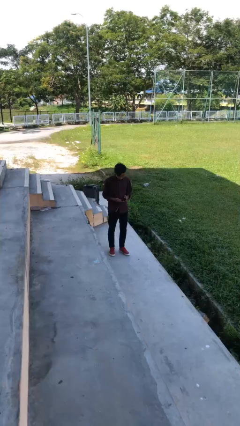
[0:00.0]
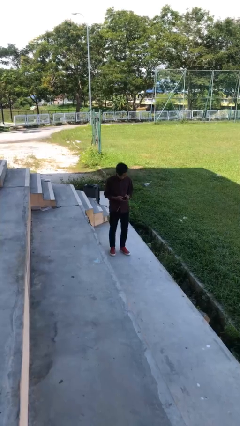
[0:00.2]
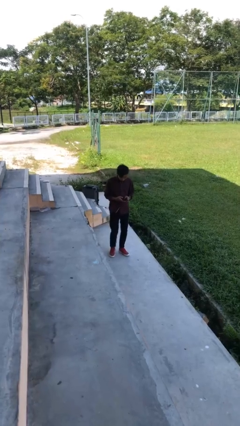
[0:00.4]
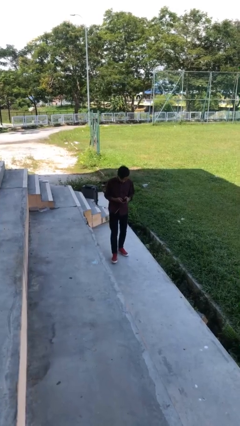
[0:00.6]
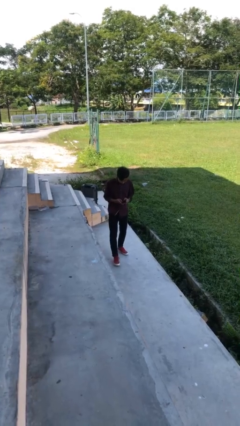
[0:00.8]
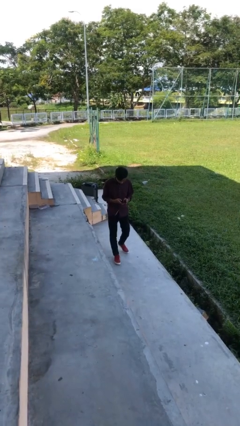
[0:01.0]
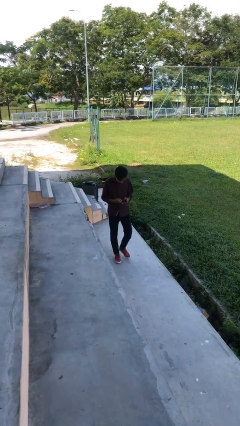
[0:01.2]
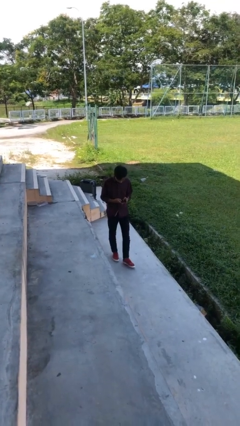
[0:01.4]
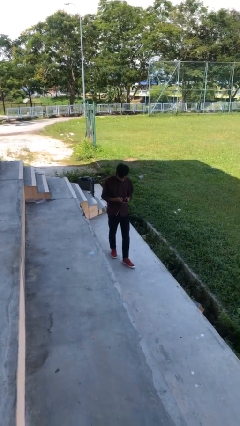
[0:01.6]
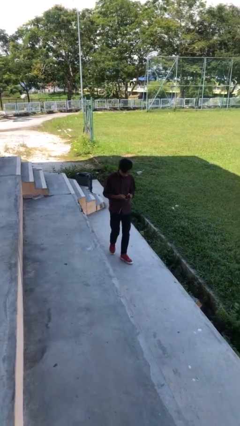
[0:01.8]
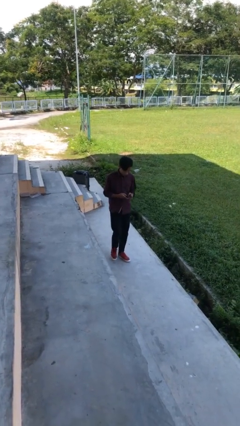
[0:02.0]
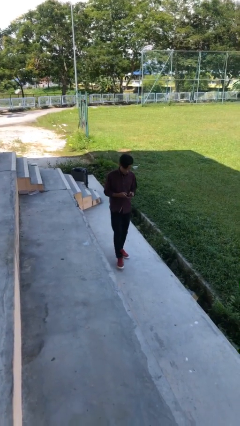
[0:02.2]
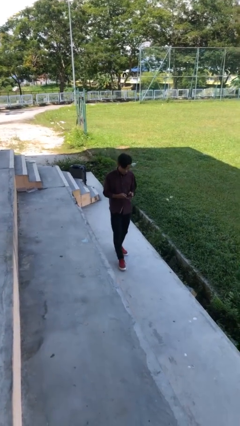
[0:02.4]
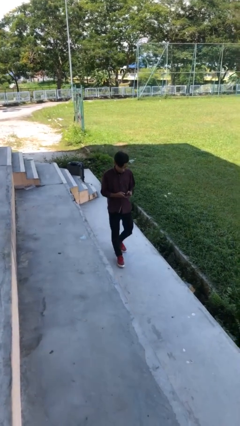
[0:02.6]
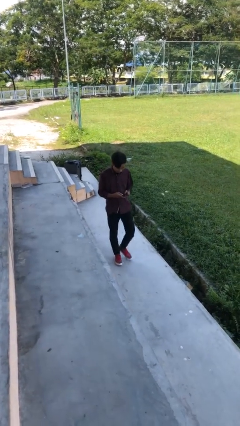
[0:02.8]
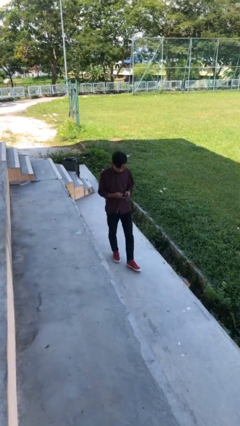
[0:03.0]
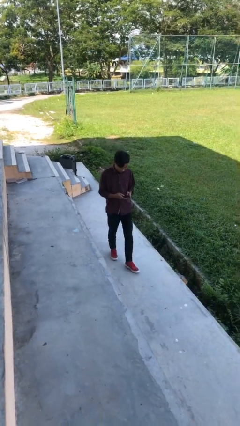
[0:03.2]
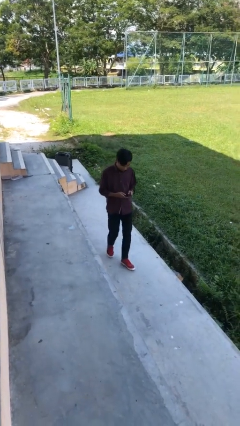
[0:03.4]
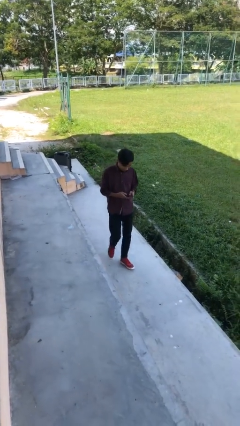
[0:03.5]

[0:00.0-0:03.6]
person texts on phone

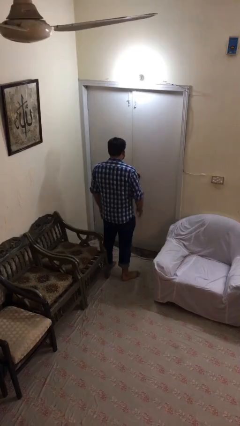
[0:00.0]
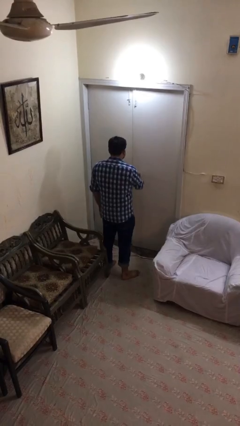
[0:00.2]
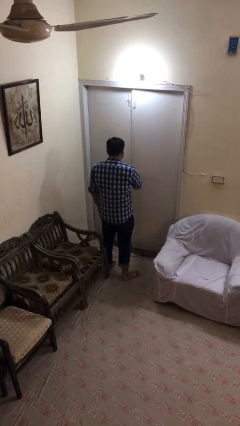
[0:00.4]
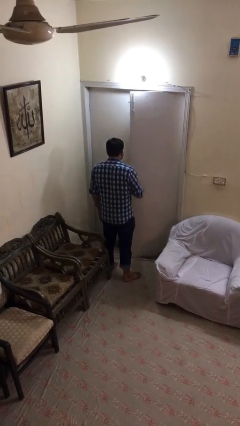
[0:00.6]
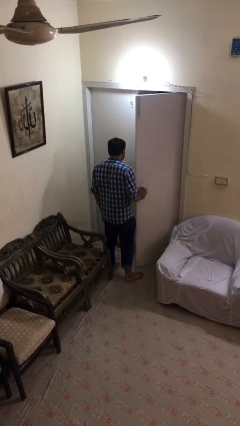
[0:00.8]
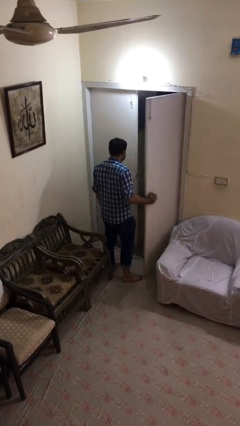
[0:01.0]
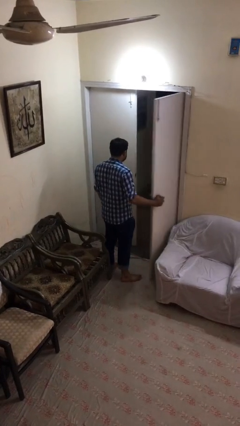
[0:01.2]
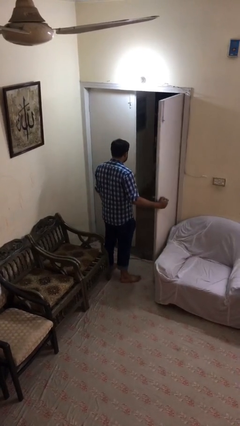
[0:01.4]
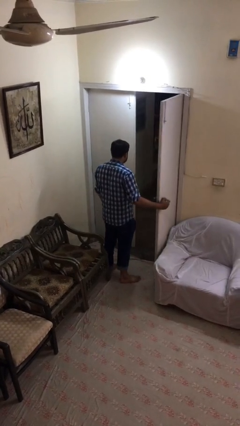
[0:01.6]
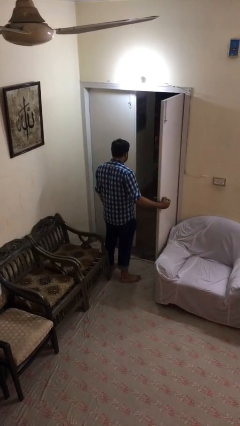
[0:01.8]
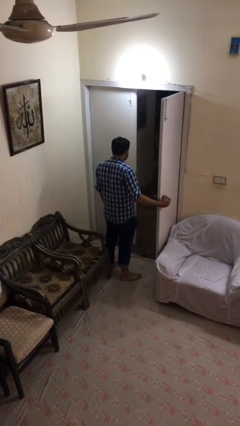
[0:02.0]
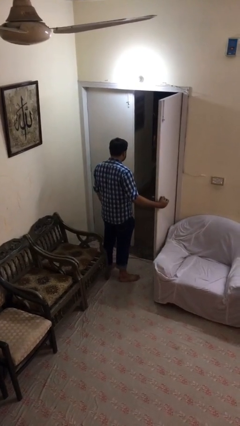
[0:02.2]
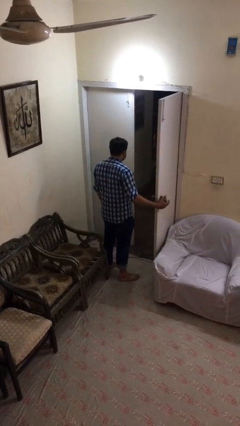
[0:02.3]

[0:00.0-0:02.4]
person opens facility door

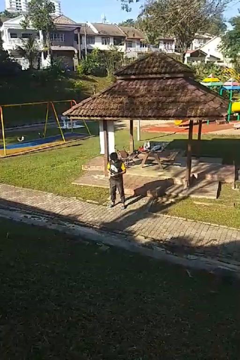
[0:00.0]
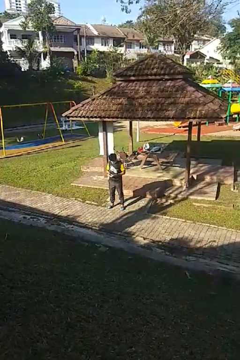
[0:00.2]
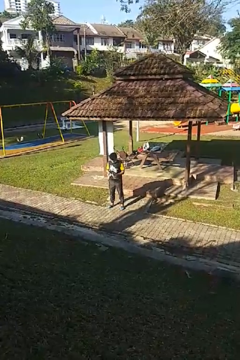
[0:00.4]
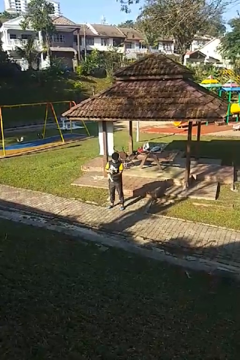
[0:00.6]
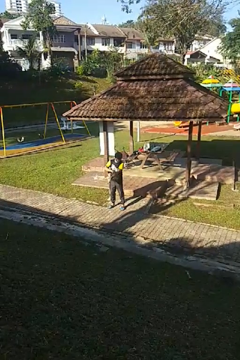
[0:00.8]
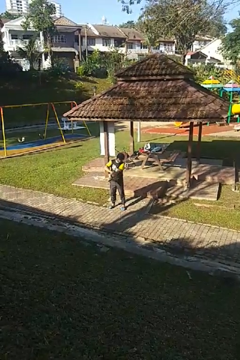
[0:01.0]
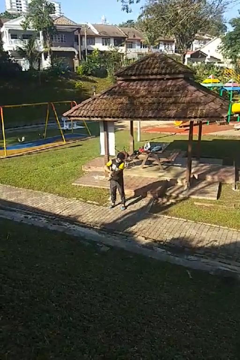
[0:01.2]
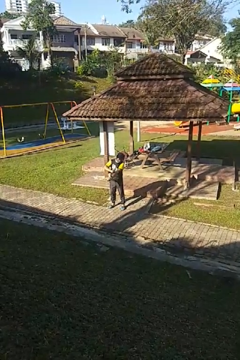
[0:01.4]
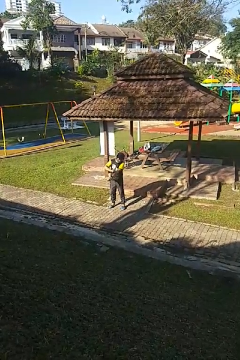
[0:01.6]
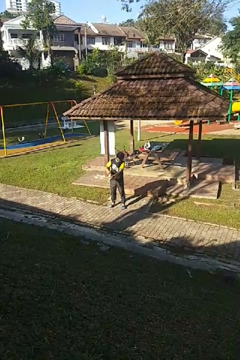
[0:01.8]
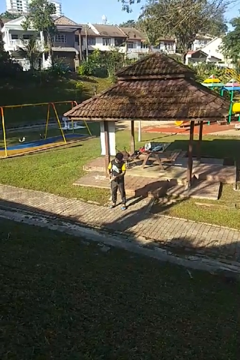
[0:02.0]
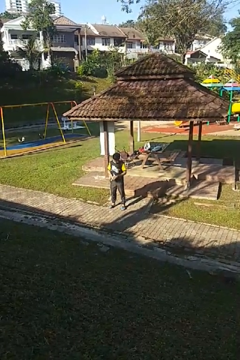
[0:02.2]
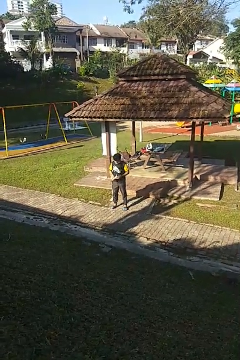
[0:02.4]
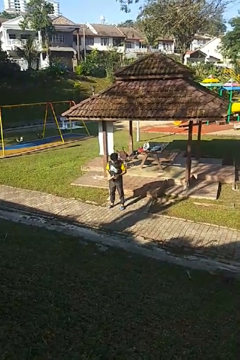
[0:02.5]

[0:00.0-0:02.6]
person applies sunscreen

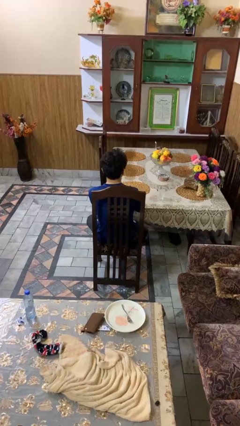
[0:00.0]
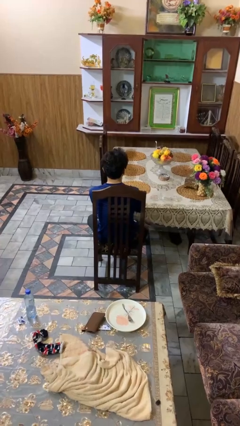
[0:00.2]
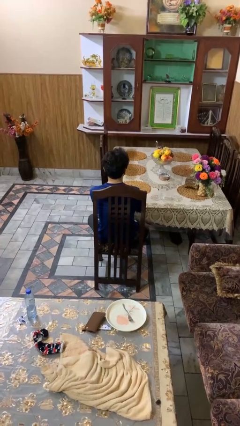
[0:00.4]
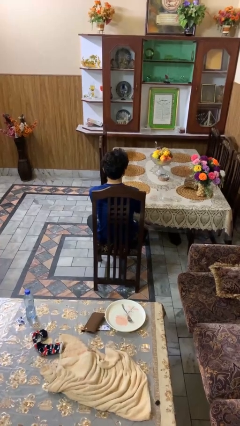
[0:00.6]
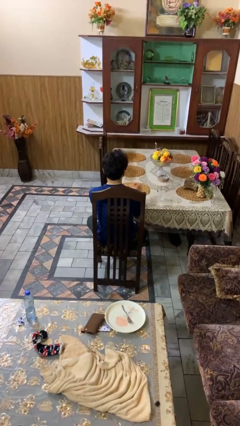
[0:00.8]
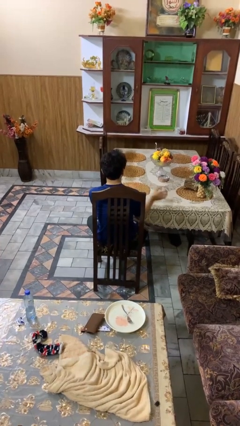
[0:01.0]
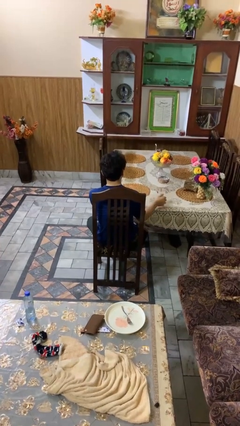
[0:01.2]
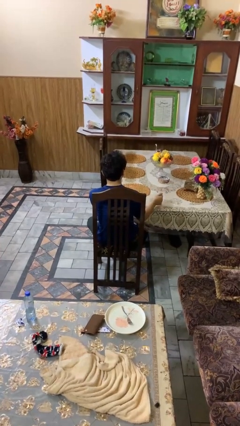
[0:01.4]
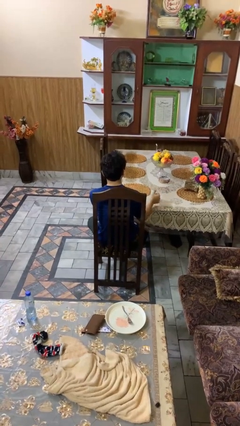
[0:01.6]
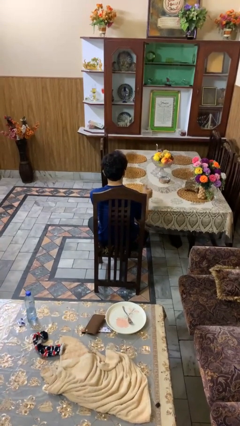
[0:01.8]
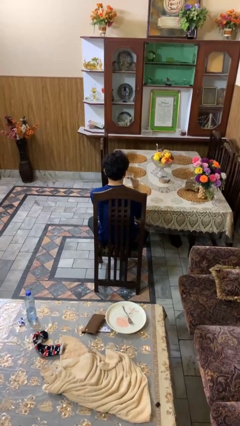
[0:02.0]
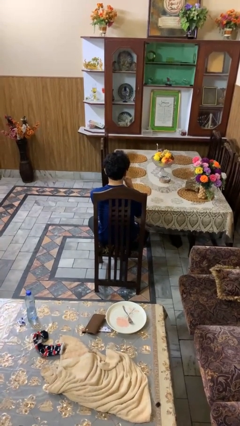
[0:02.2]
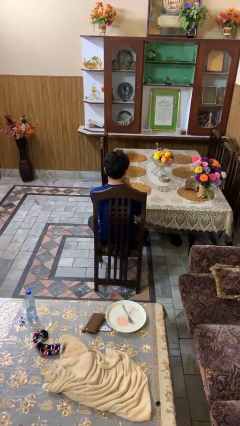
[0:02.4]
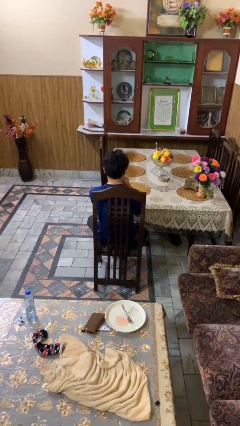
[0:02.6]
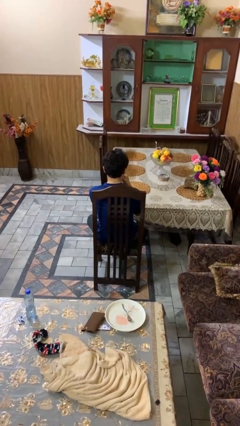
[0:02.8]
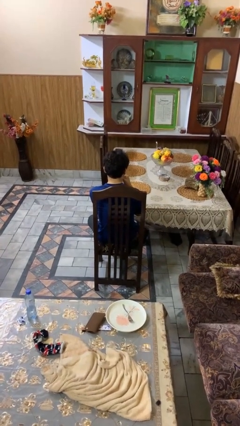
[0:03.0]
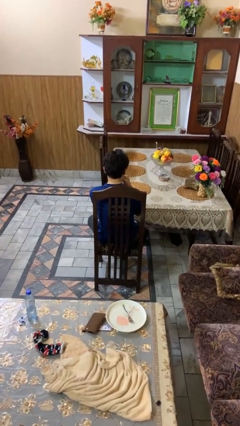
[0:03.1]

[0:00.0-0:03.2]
person picks up object from table

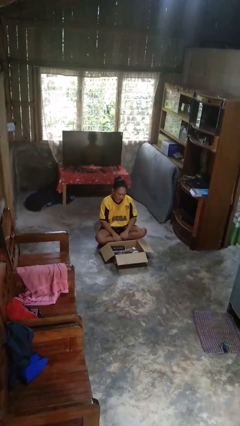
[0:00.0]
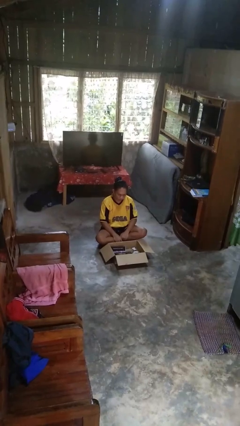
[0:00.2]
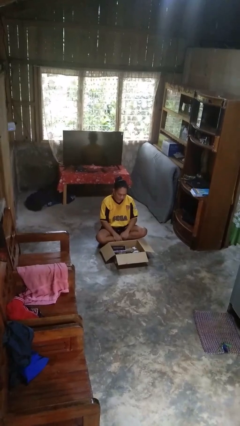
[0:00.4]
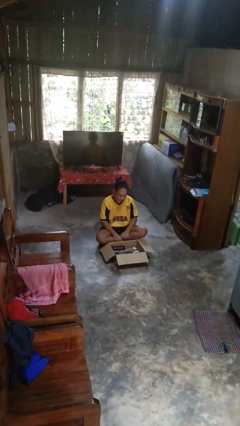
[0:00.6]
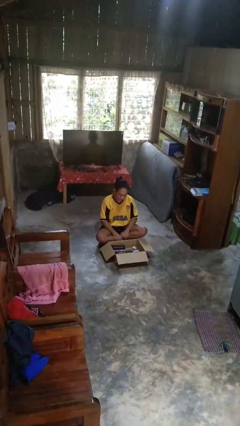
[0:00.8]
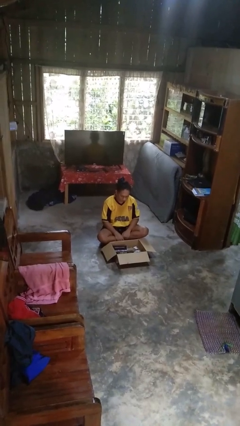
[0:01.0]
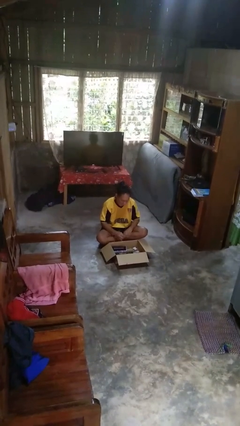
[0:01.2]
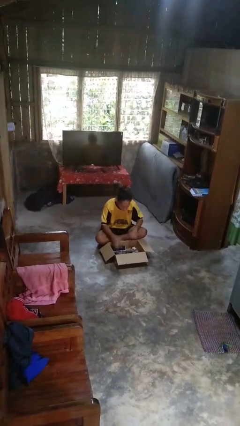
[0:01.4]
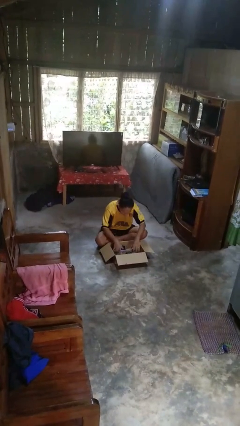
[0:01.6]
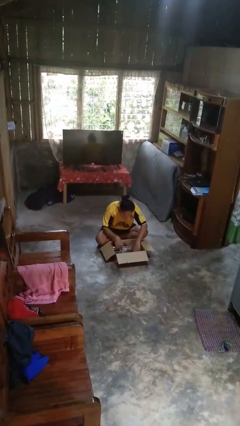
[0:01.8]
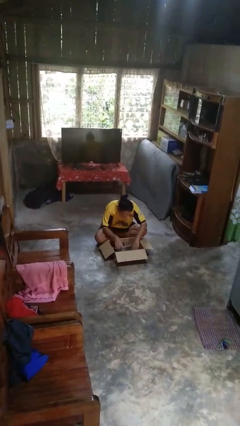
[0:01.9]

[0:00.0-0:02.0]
person searches in box

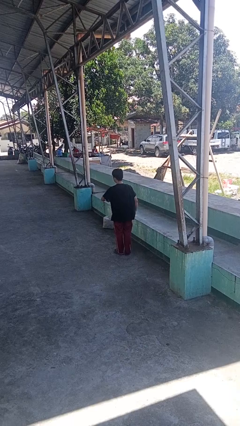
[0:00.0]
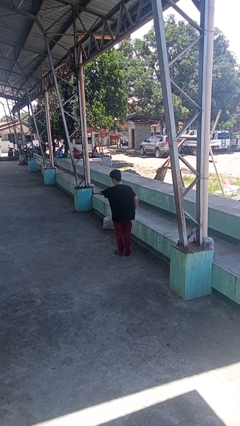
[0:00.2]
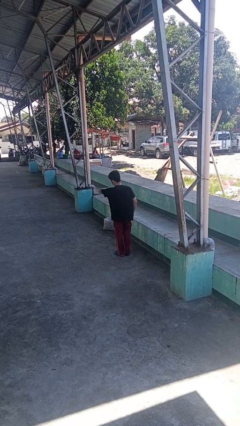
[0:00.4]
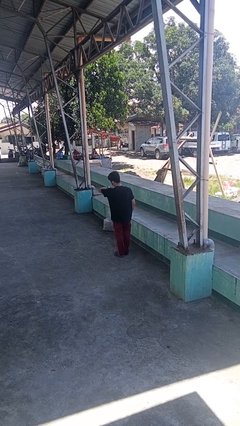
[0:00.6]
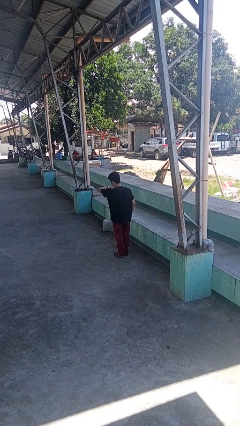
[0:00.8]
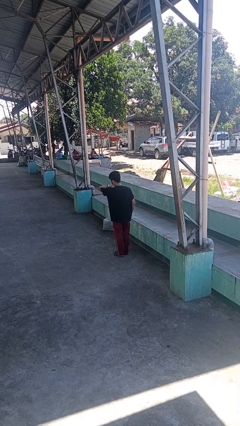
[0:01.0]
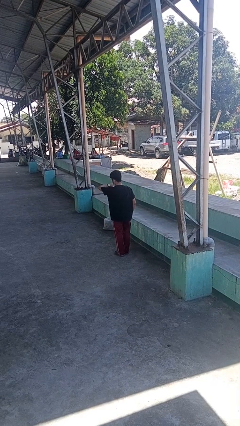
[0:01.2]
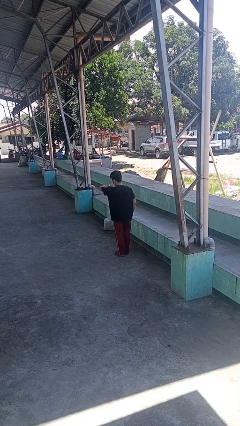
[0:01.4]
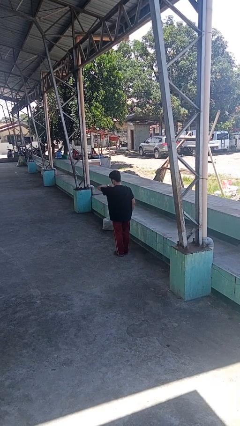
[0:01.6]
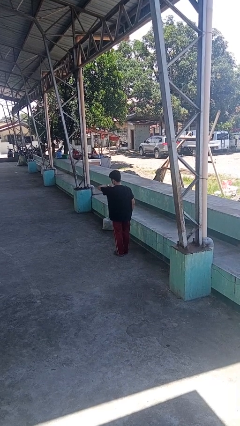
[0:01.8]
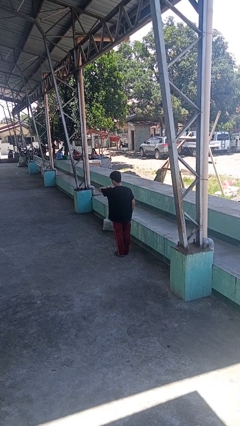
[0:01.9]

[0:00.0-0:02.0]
person looks at wristwatch

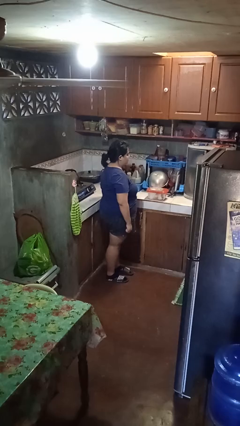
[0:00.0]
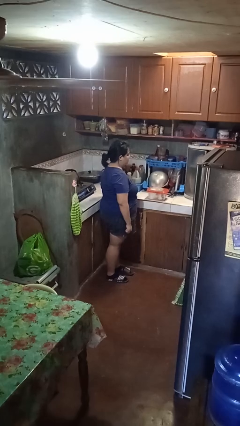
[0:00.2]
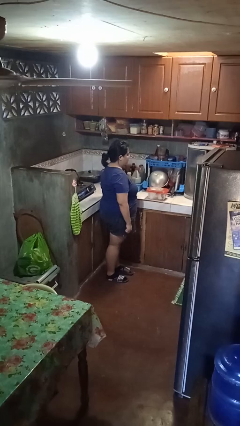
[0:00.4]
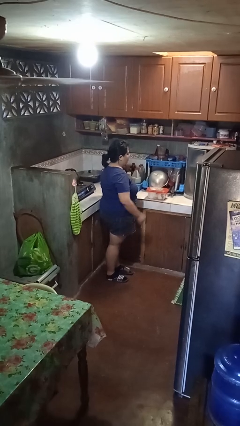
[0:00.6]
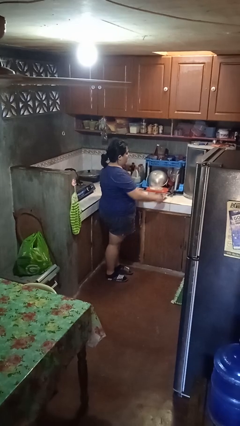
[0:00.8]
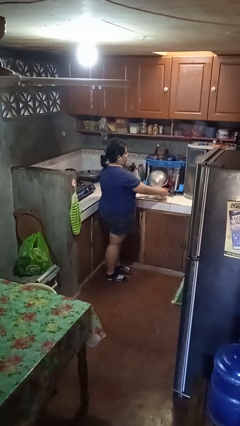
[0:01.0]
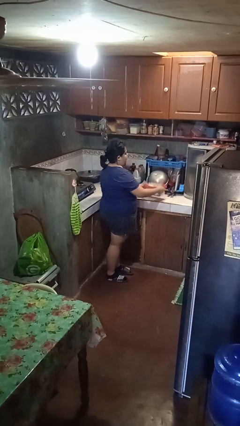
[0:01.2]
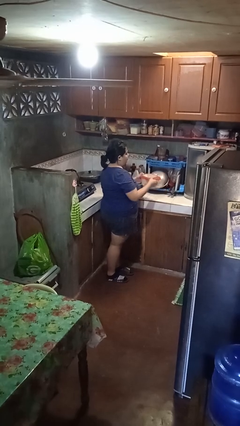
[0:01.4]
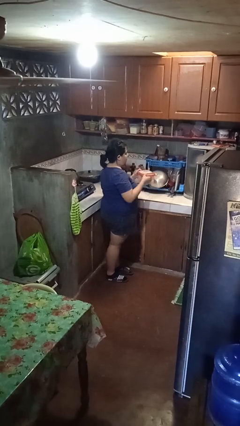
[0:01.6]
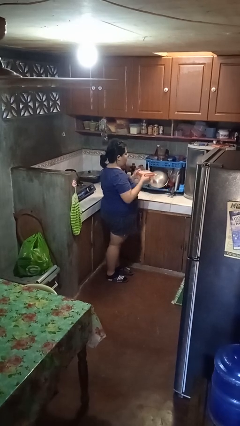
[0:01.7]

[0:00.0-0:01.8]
person picks up object from countertop
